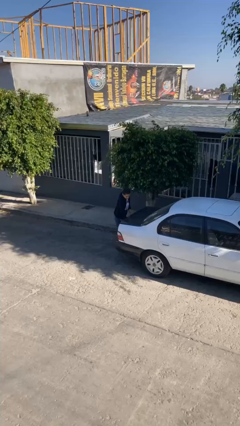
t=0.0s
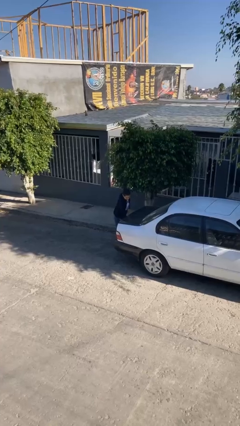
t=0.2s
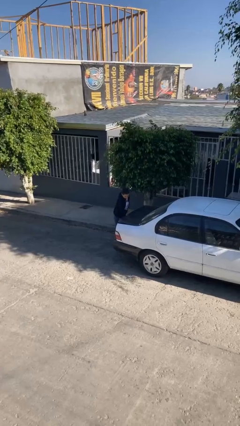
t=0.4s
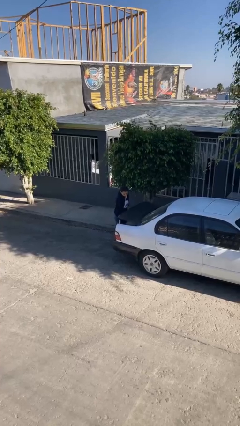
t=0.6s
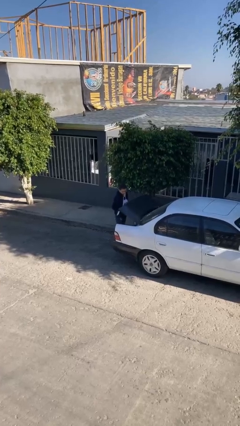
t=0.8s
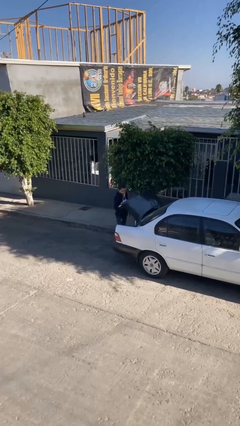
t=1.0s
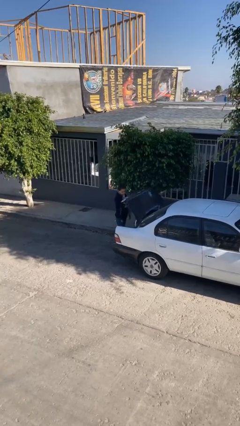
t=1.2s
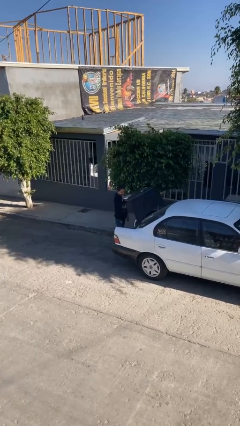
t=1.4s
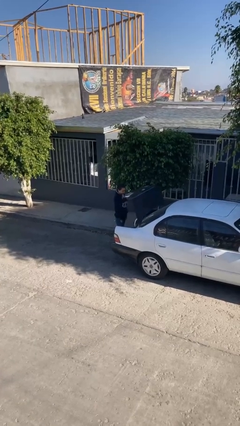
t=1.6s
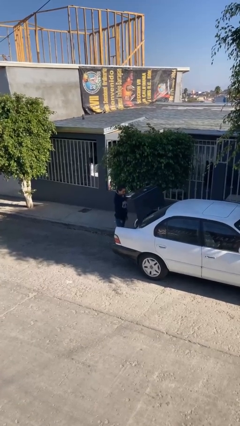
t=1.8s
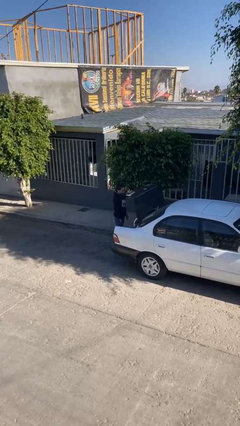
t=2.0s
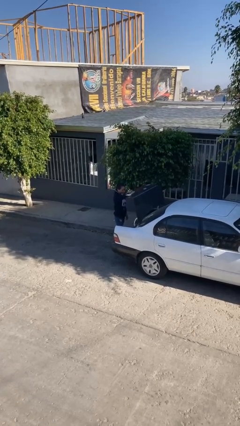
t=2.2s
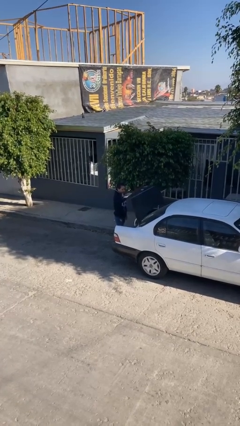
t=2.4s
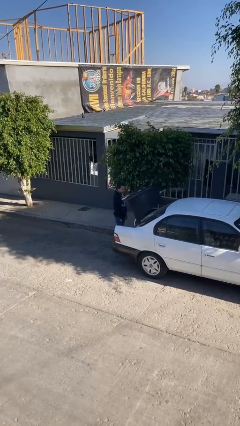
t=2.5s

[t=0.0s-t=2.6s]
person opens car trunk

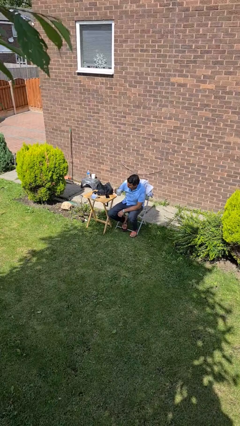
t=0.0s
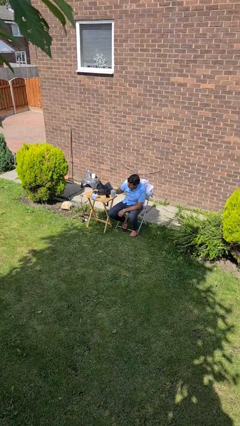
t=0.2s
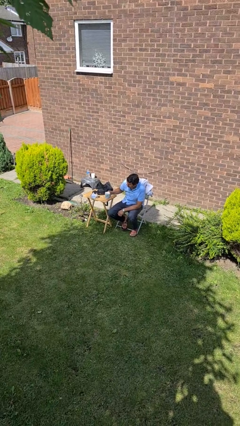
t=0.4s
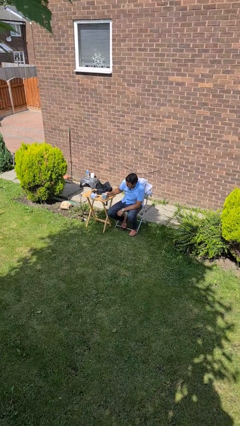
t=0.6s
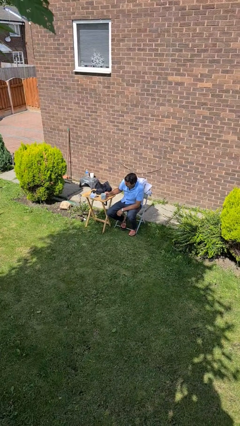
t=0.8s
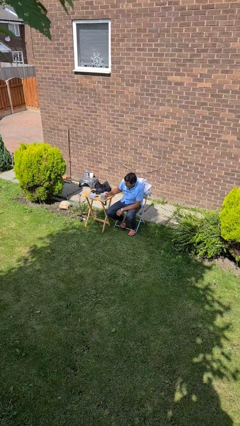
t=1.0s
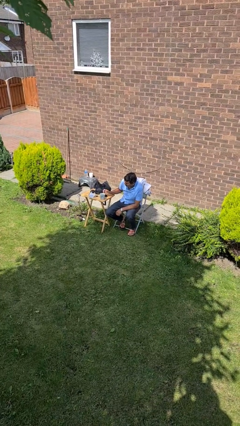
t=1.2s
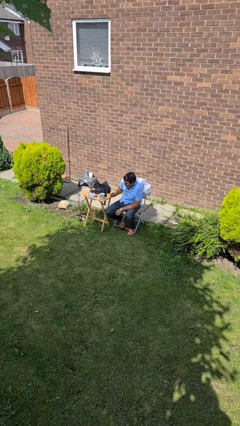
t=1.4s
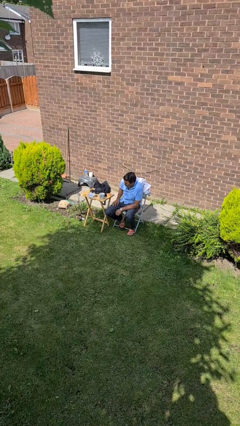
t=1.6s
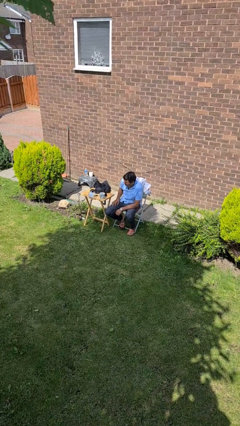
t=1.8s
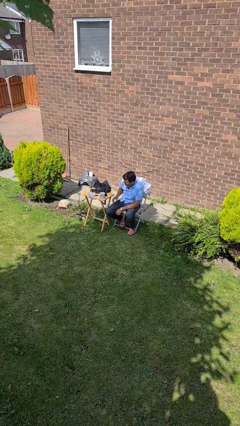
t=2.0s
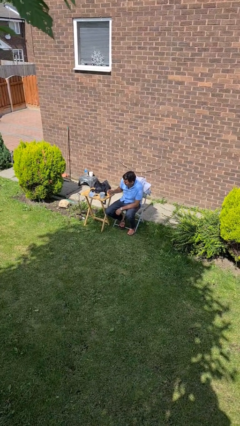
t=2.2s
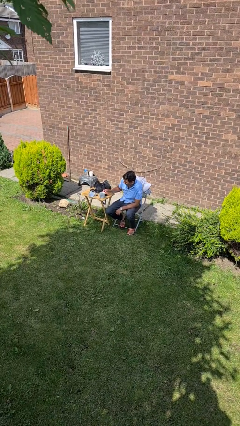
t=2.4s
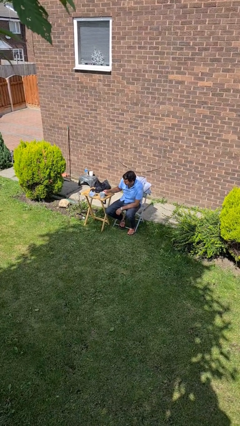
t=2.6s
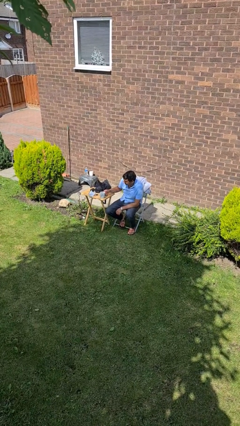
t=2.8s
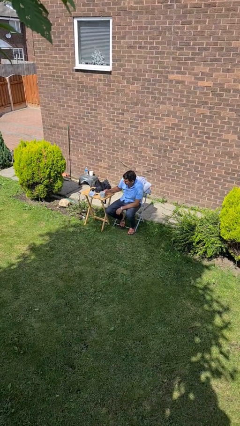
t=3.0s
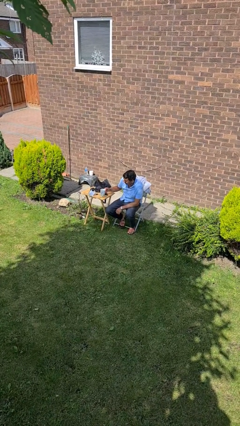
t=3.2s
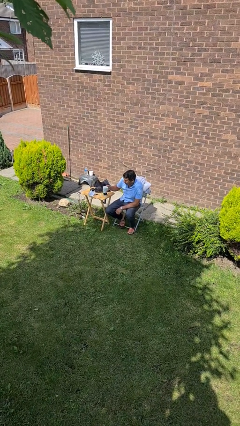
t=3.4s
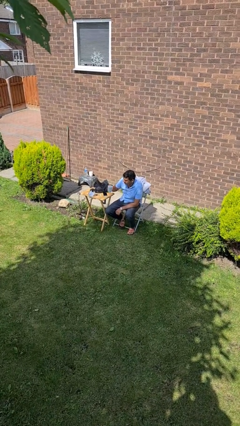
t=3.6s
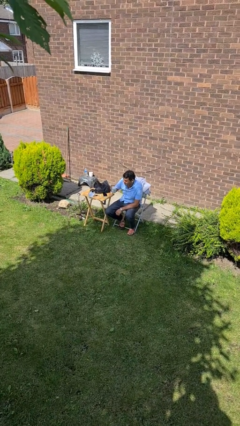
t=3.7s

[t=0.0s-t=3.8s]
person picks up object from table

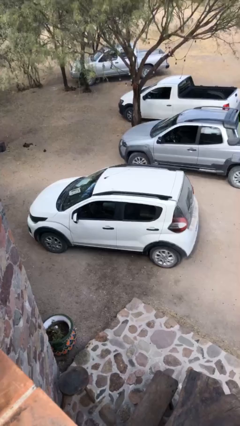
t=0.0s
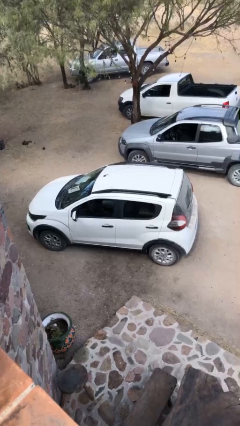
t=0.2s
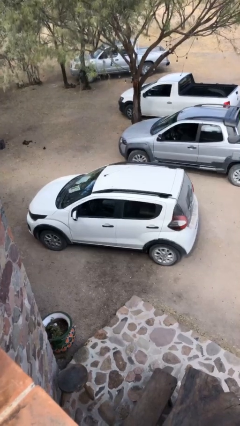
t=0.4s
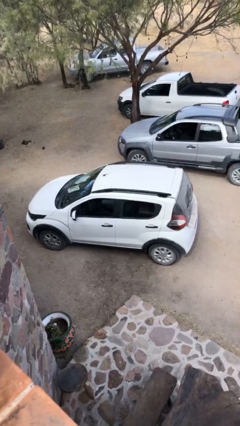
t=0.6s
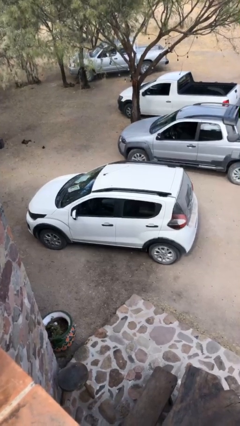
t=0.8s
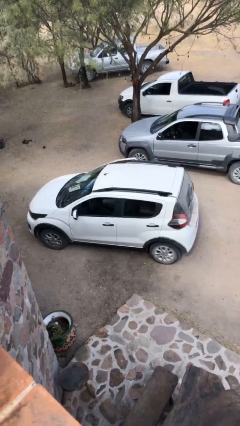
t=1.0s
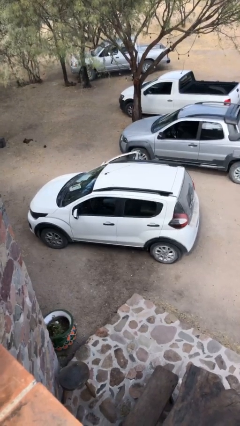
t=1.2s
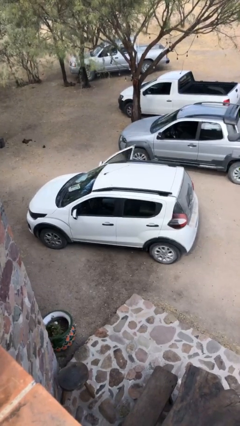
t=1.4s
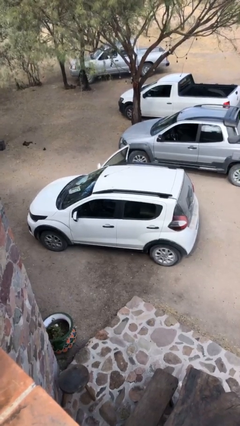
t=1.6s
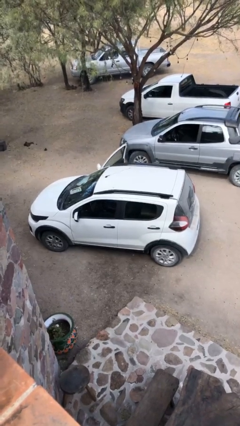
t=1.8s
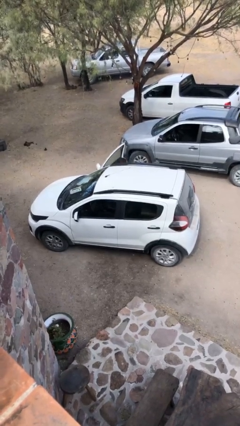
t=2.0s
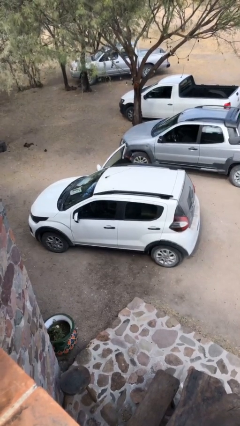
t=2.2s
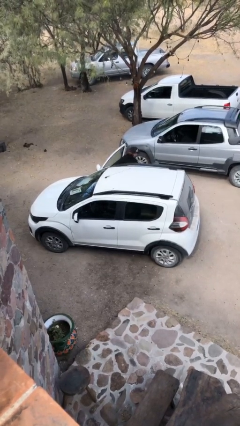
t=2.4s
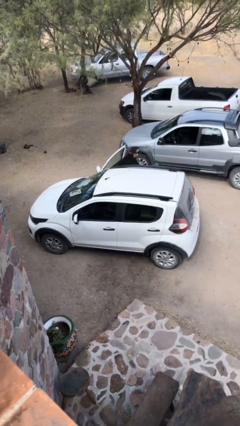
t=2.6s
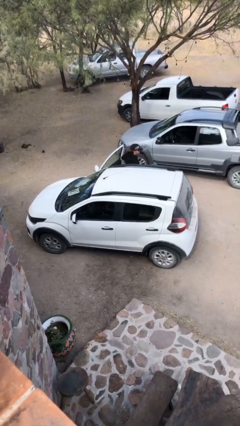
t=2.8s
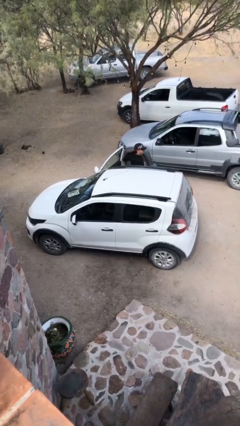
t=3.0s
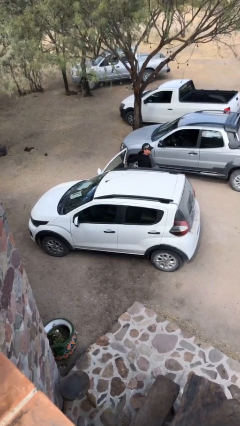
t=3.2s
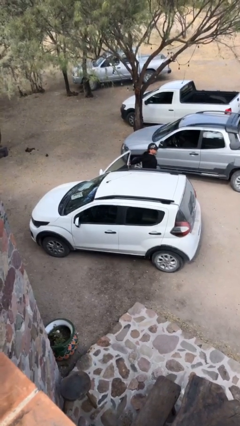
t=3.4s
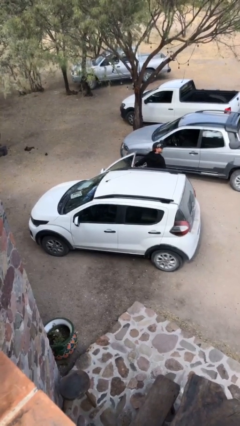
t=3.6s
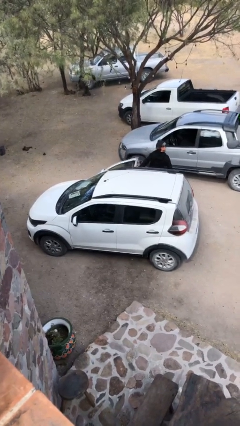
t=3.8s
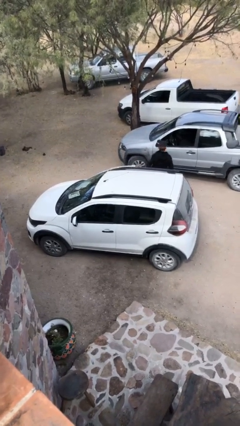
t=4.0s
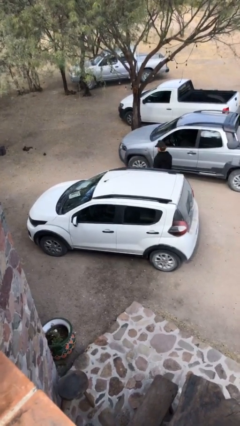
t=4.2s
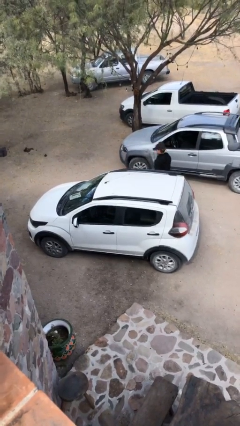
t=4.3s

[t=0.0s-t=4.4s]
car drops off person

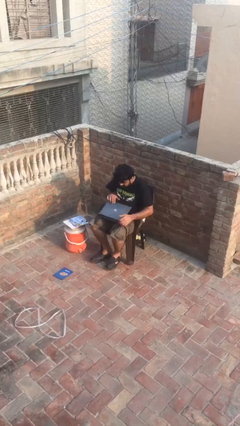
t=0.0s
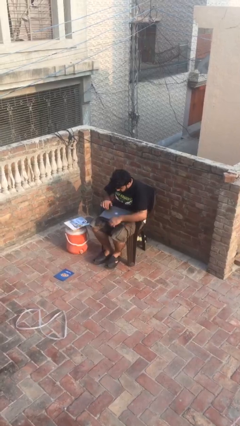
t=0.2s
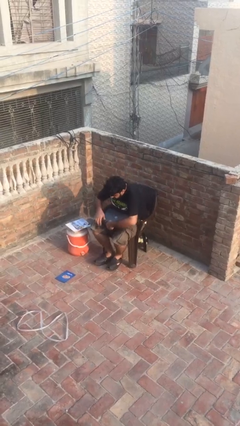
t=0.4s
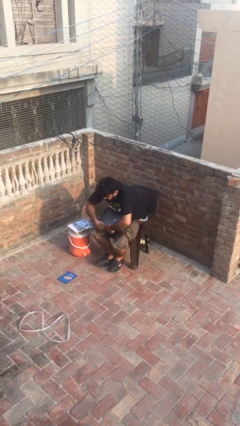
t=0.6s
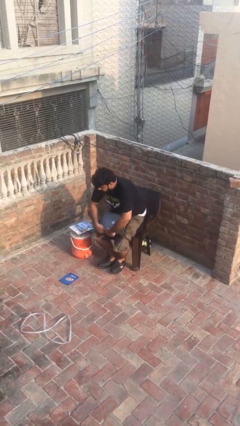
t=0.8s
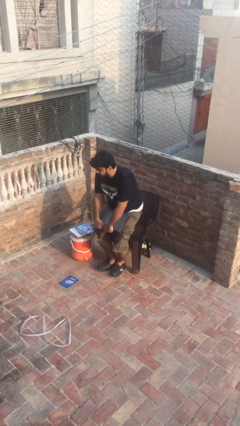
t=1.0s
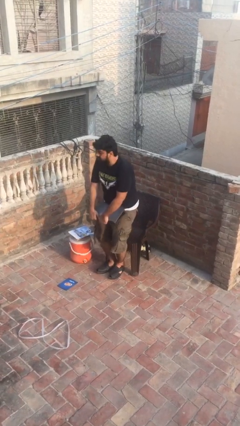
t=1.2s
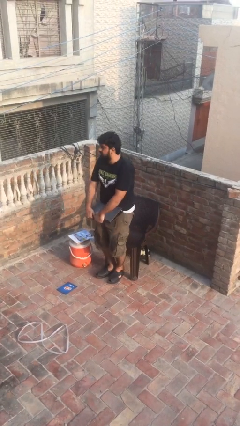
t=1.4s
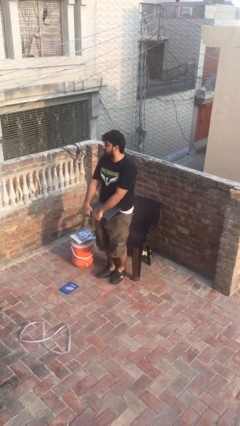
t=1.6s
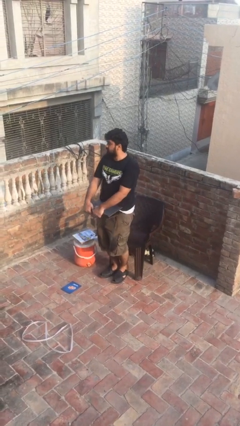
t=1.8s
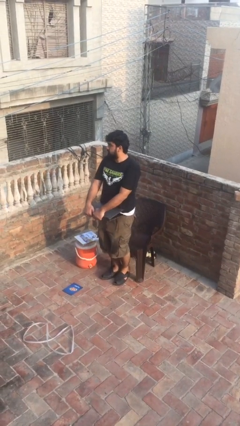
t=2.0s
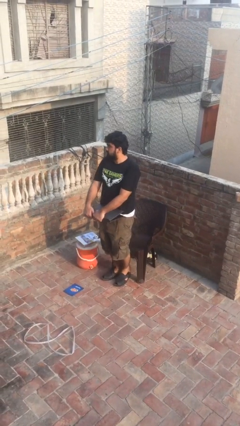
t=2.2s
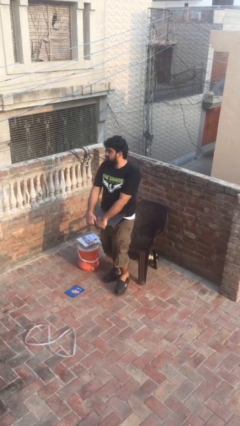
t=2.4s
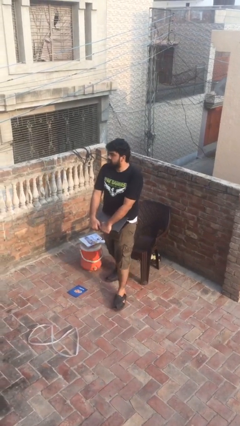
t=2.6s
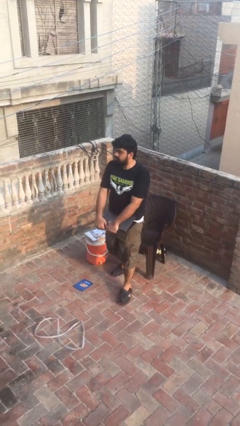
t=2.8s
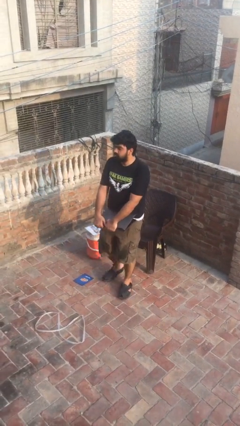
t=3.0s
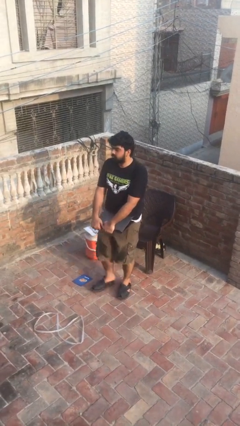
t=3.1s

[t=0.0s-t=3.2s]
person stands up

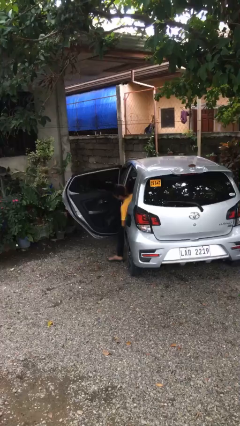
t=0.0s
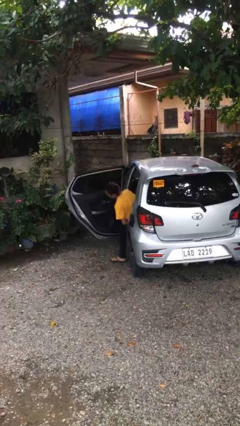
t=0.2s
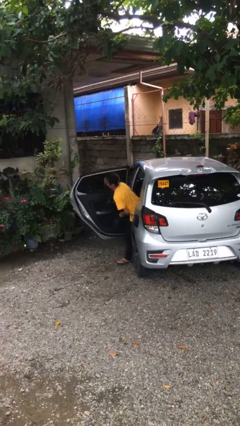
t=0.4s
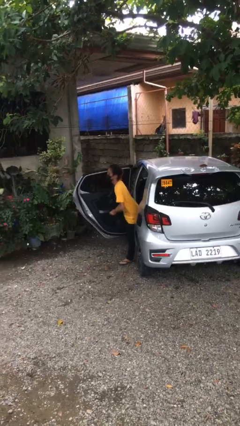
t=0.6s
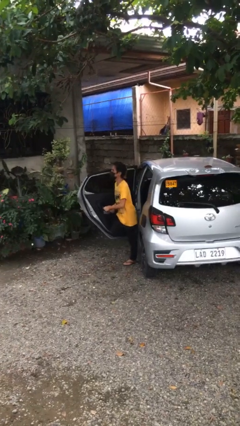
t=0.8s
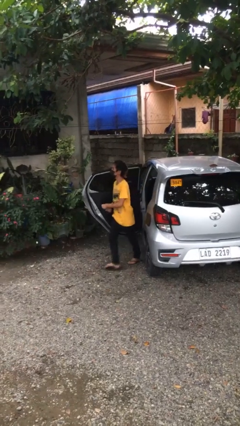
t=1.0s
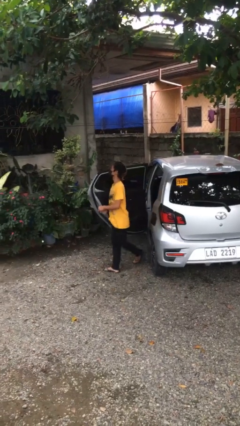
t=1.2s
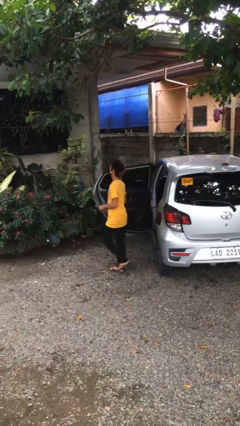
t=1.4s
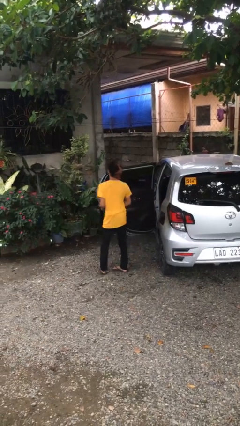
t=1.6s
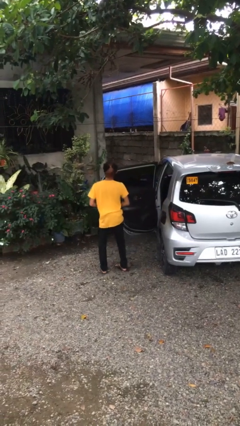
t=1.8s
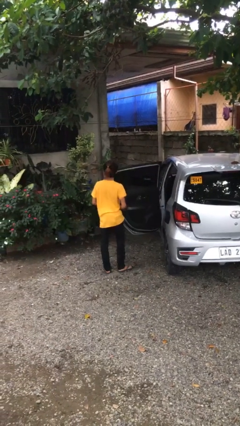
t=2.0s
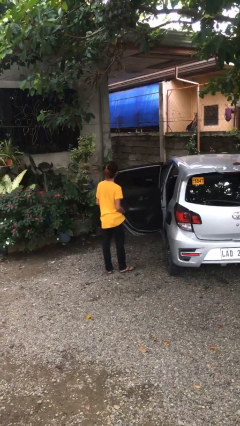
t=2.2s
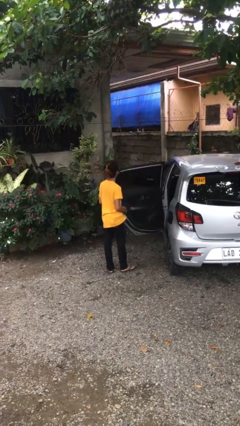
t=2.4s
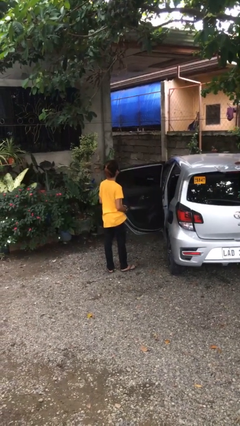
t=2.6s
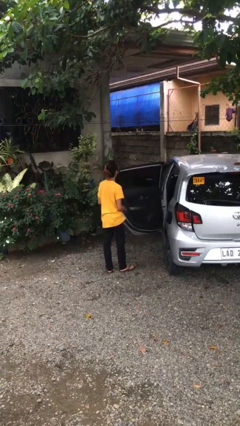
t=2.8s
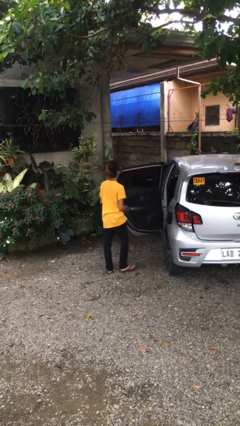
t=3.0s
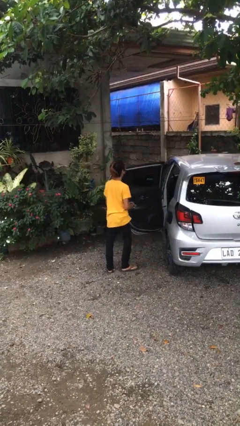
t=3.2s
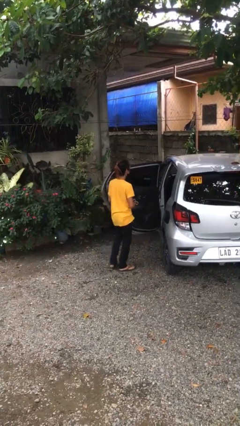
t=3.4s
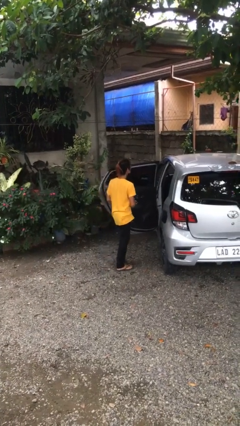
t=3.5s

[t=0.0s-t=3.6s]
person exits car
